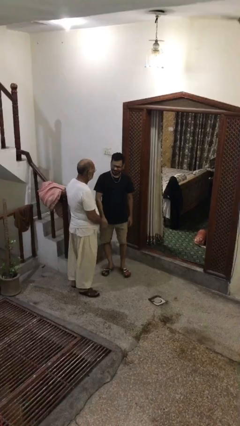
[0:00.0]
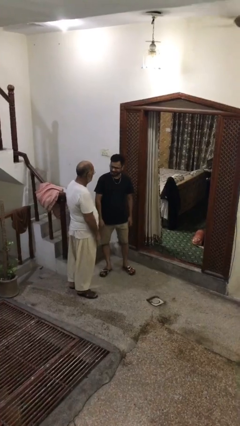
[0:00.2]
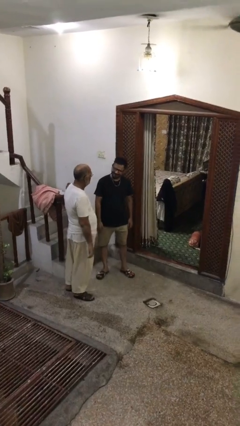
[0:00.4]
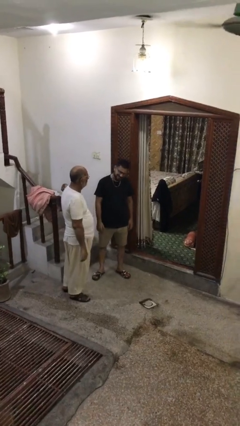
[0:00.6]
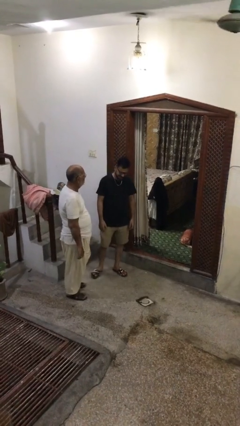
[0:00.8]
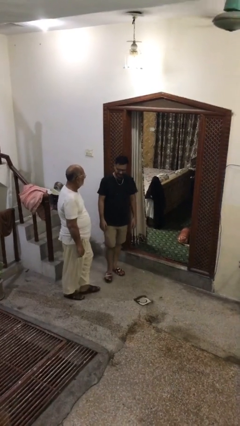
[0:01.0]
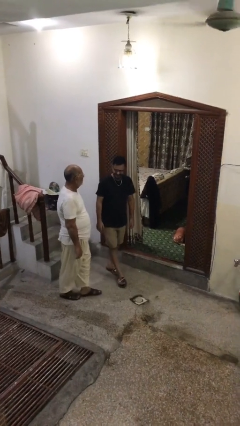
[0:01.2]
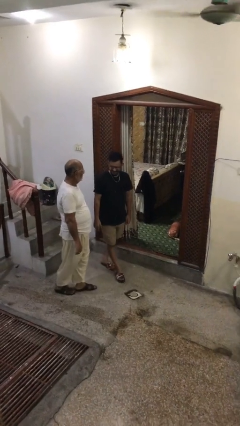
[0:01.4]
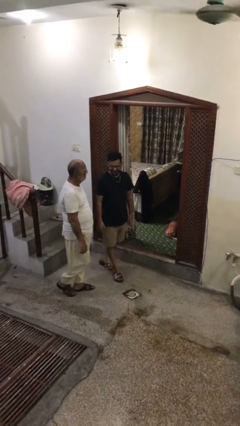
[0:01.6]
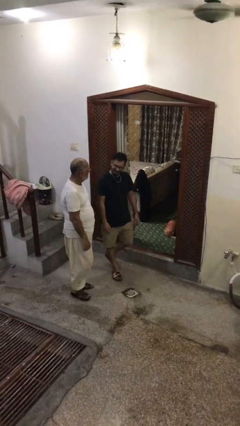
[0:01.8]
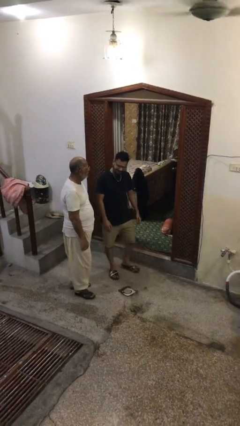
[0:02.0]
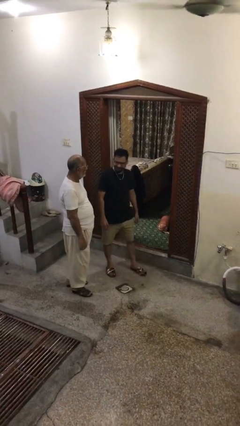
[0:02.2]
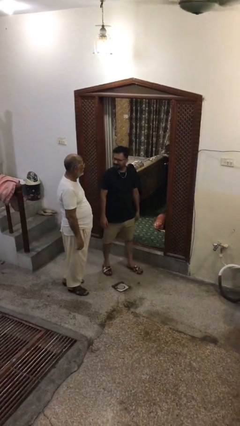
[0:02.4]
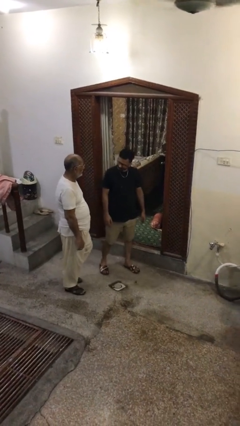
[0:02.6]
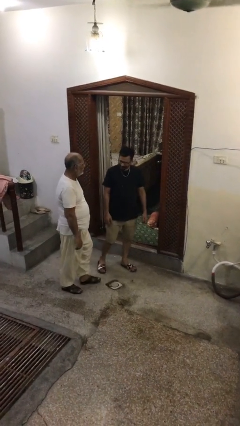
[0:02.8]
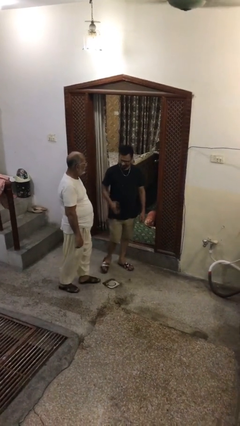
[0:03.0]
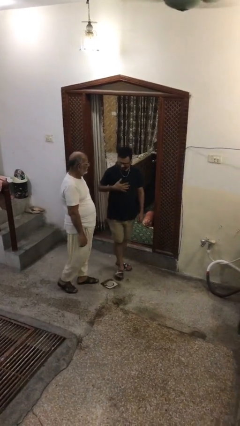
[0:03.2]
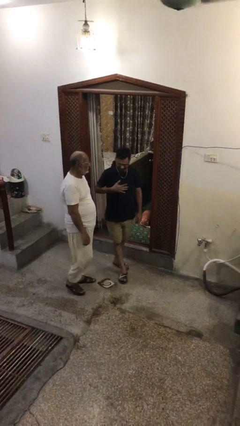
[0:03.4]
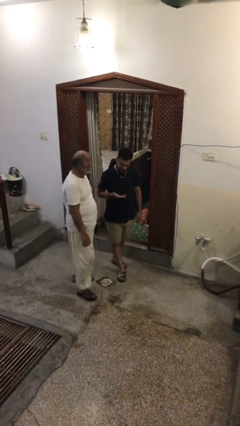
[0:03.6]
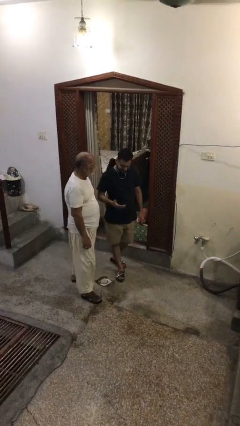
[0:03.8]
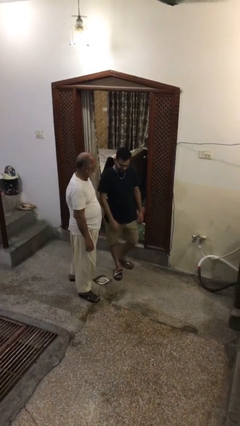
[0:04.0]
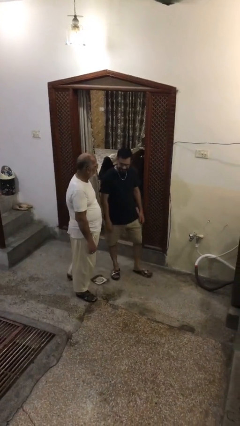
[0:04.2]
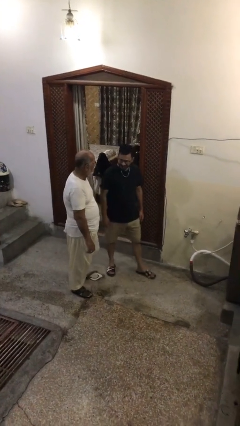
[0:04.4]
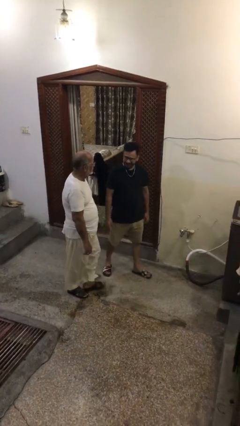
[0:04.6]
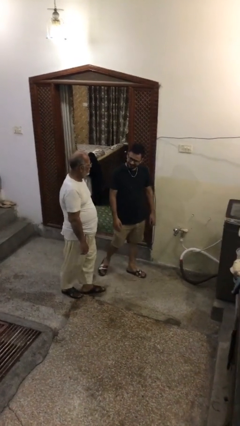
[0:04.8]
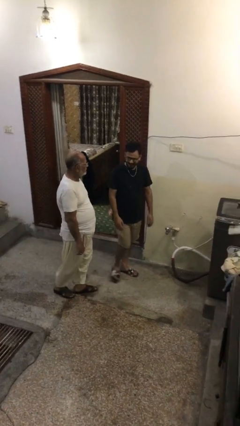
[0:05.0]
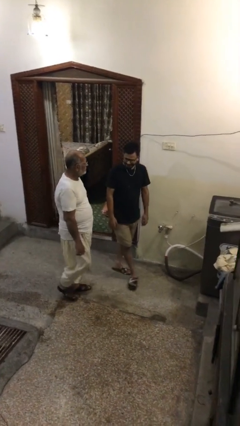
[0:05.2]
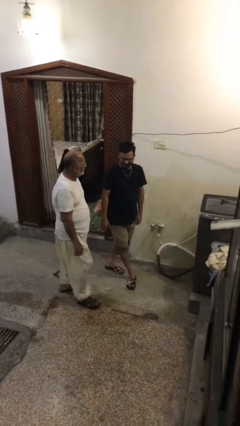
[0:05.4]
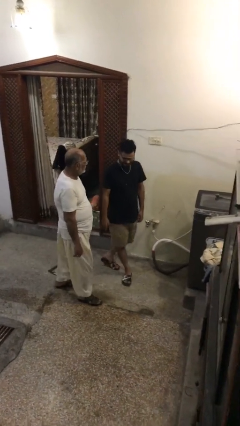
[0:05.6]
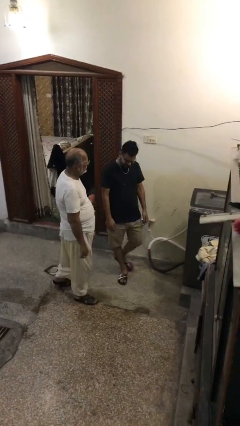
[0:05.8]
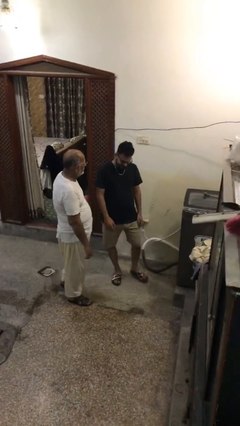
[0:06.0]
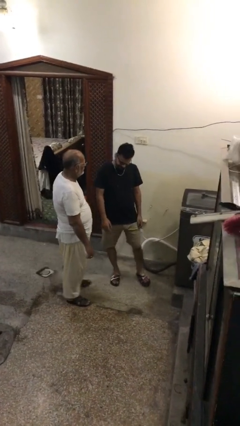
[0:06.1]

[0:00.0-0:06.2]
person talks to person

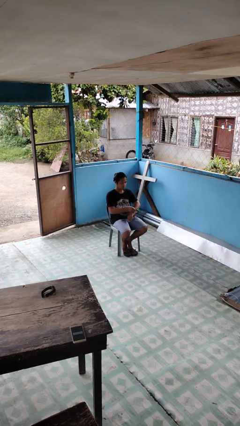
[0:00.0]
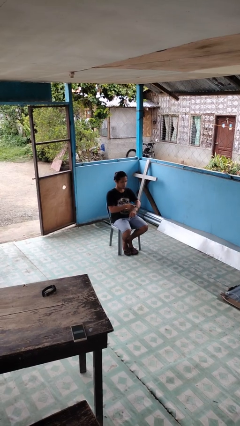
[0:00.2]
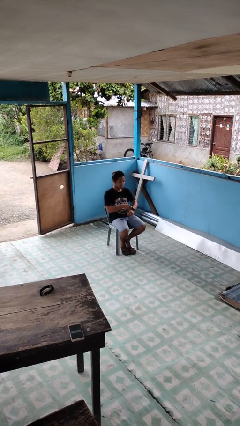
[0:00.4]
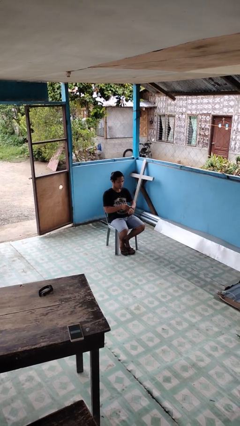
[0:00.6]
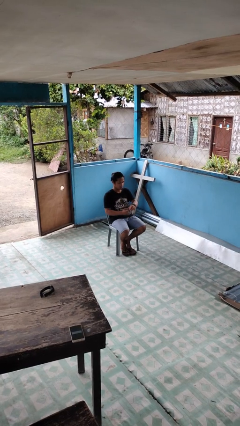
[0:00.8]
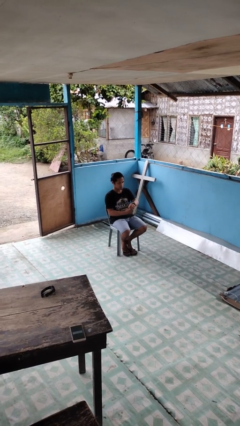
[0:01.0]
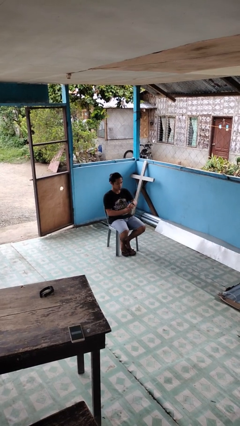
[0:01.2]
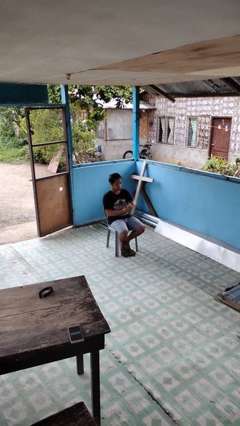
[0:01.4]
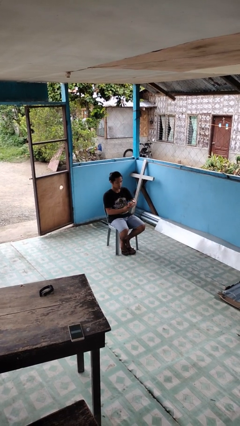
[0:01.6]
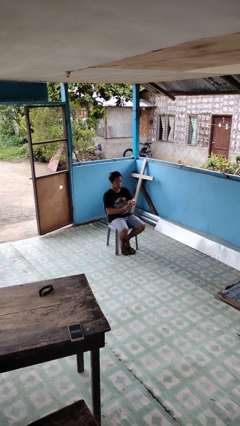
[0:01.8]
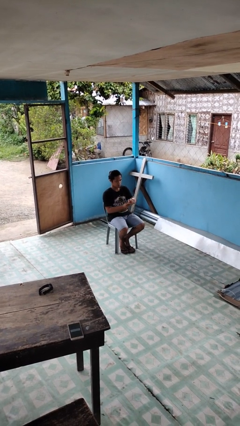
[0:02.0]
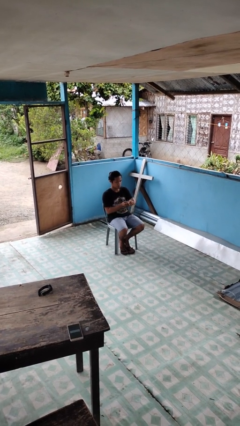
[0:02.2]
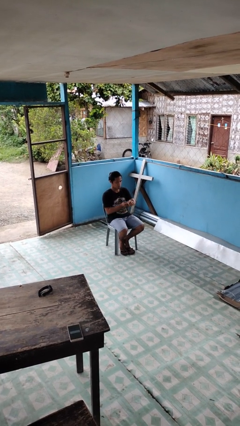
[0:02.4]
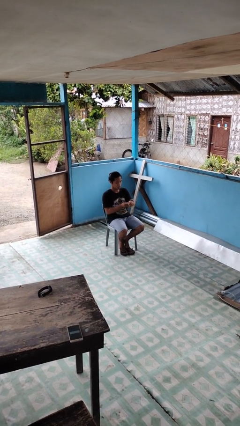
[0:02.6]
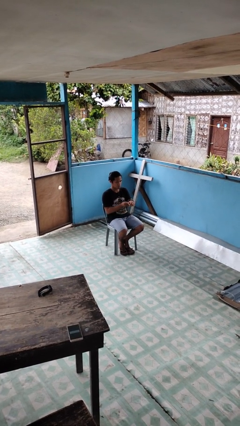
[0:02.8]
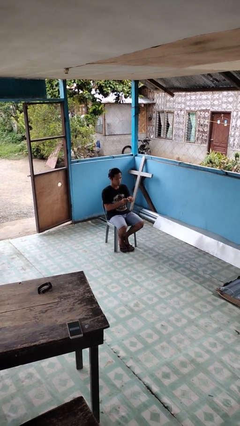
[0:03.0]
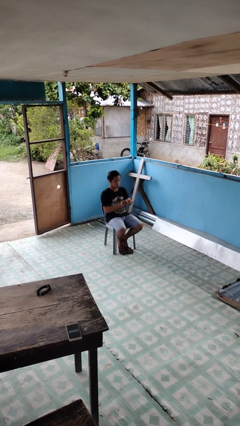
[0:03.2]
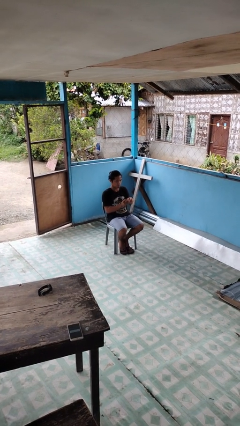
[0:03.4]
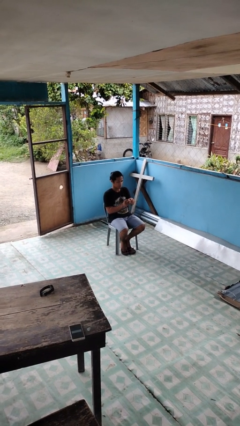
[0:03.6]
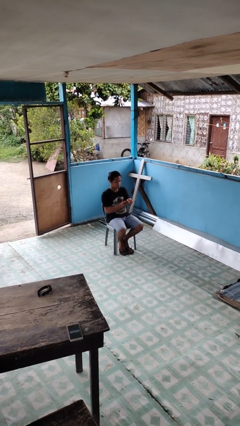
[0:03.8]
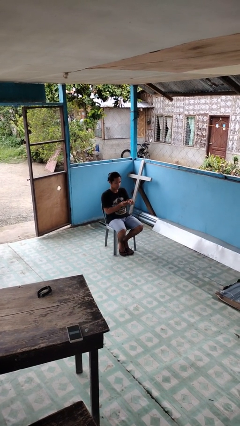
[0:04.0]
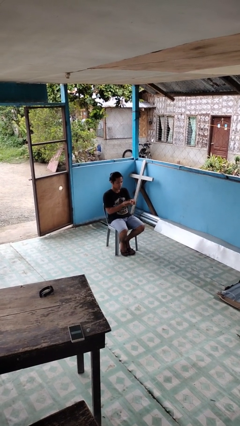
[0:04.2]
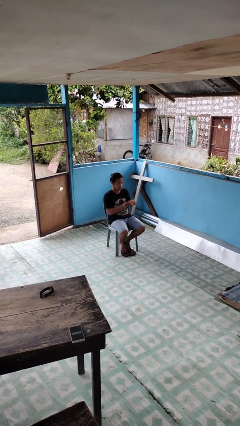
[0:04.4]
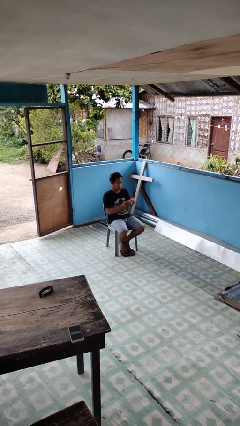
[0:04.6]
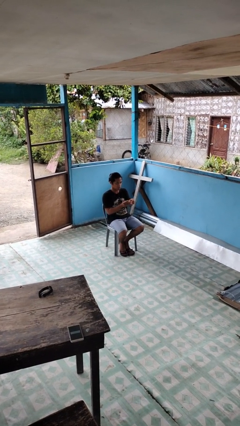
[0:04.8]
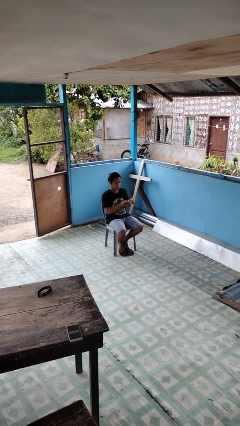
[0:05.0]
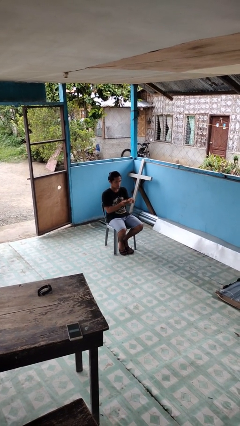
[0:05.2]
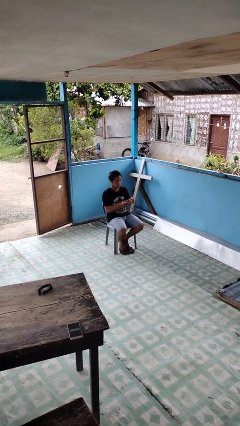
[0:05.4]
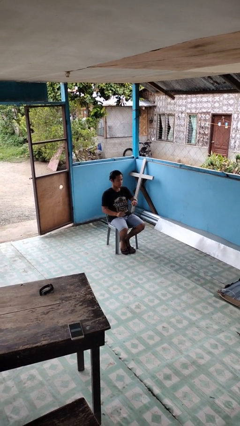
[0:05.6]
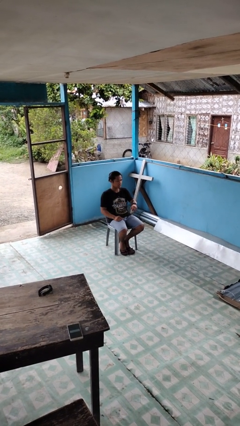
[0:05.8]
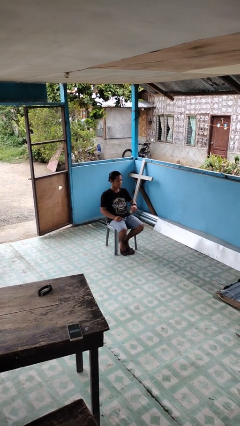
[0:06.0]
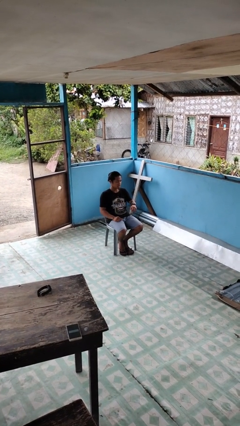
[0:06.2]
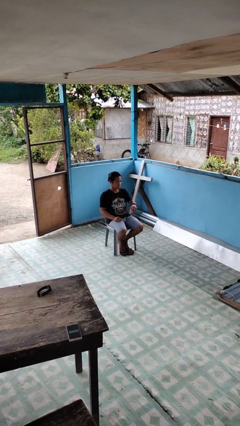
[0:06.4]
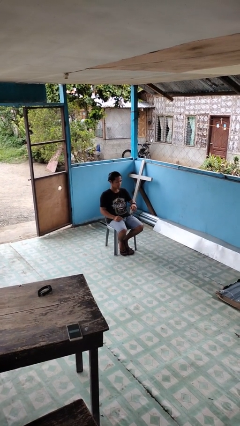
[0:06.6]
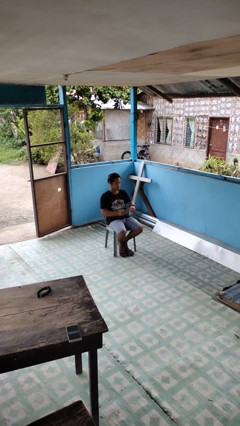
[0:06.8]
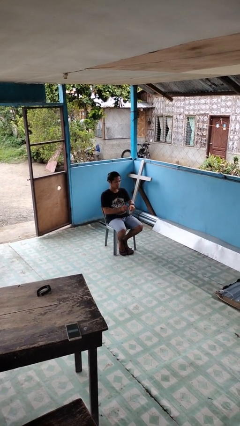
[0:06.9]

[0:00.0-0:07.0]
person puts on wristwatch

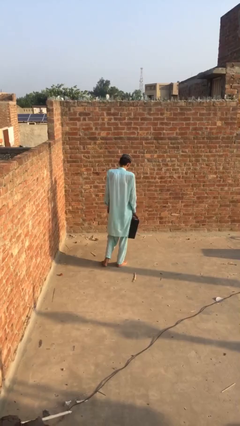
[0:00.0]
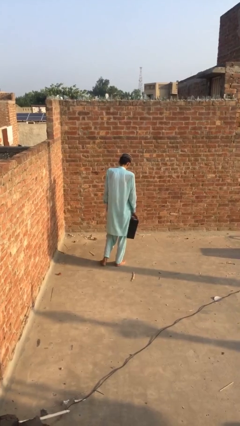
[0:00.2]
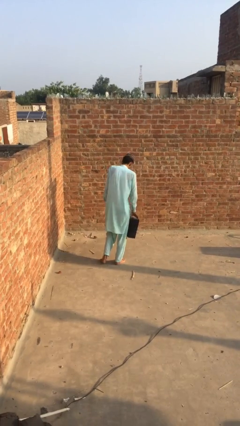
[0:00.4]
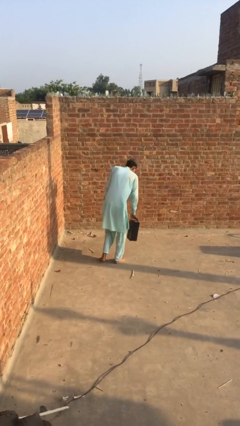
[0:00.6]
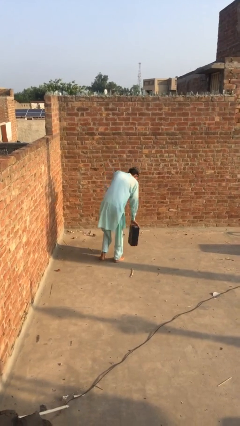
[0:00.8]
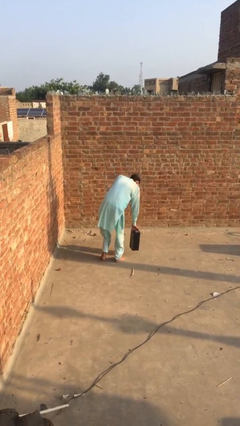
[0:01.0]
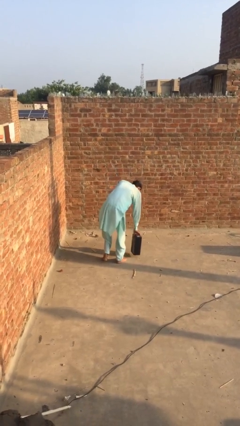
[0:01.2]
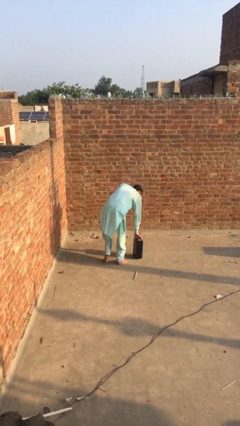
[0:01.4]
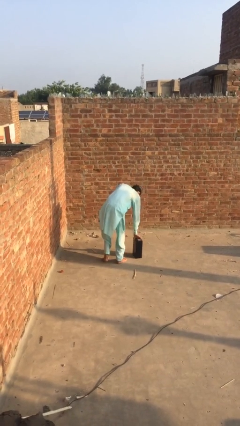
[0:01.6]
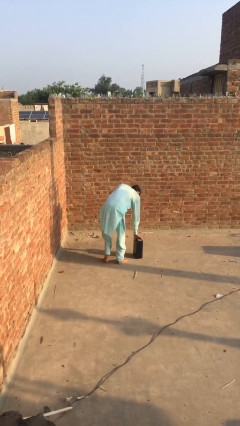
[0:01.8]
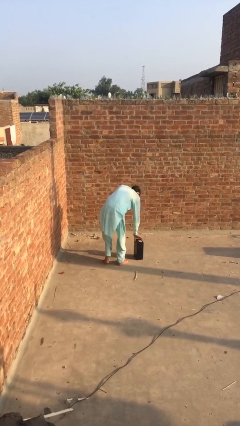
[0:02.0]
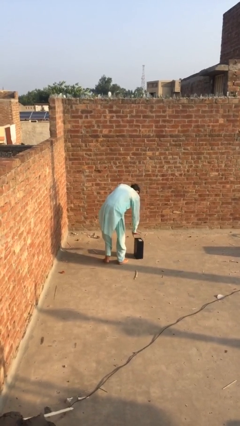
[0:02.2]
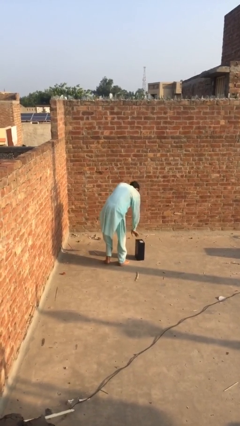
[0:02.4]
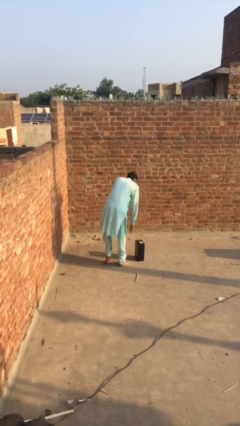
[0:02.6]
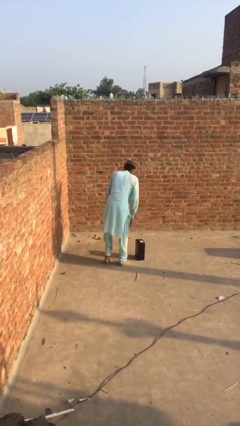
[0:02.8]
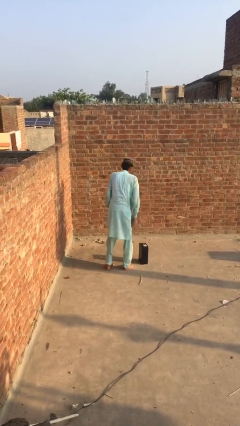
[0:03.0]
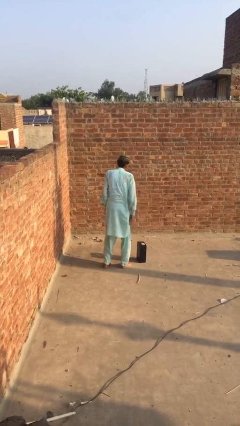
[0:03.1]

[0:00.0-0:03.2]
person puts down object on floor

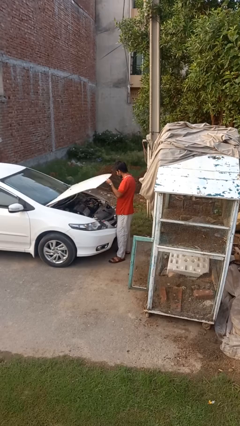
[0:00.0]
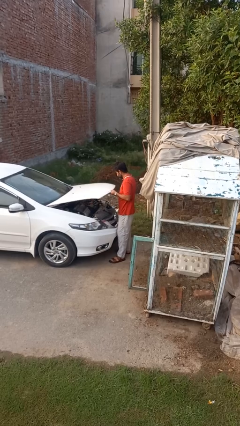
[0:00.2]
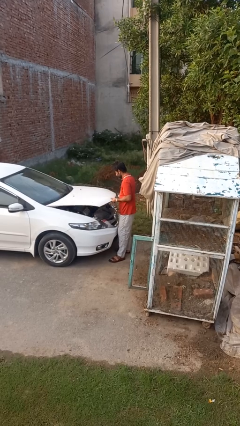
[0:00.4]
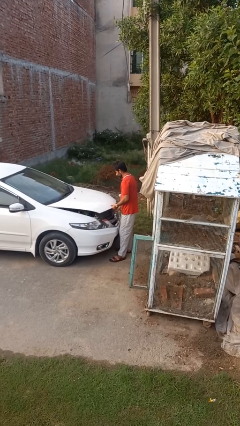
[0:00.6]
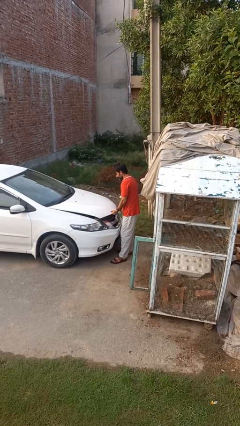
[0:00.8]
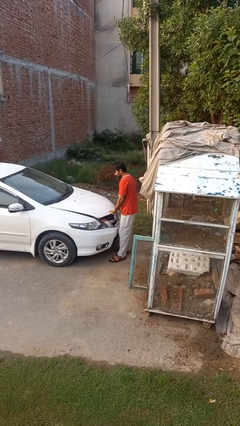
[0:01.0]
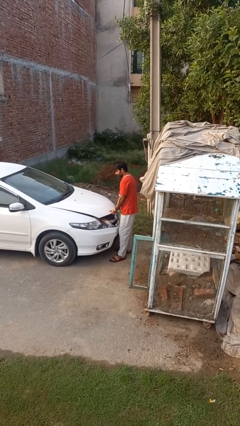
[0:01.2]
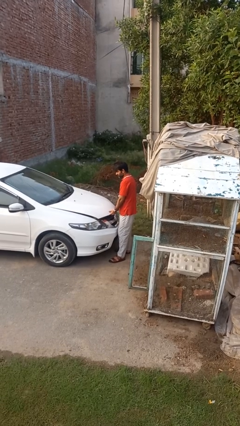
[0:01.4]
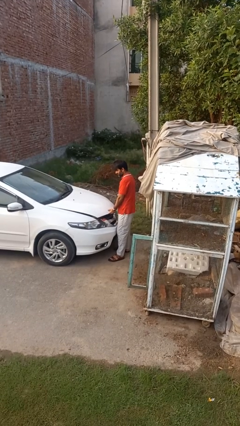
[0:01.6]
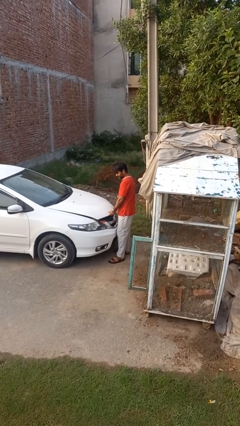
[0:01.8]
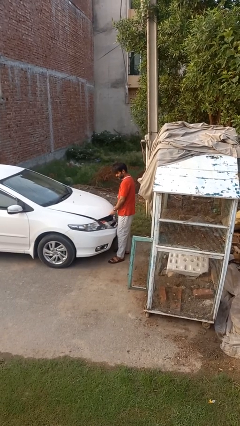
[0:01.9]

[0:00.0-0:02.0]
person closes car hood
